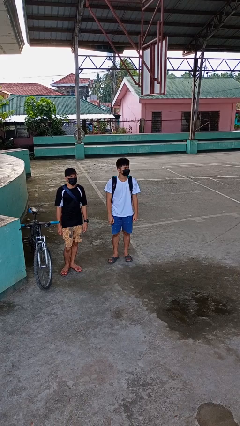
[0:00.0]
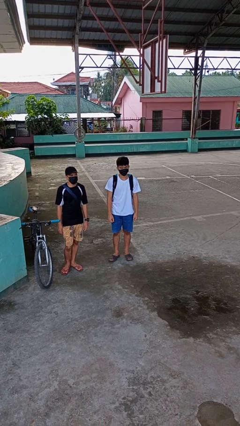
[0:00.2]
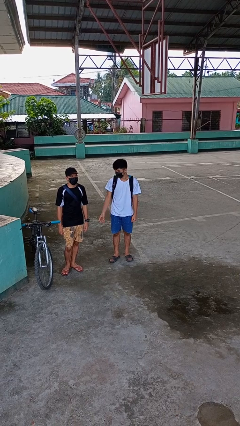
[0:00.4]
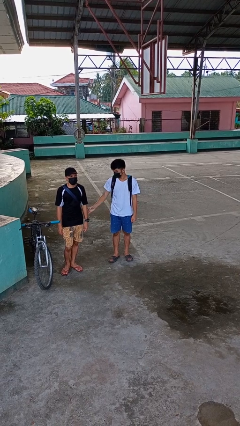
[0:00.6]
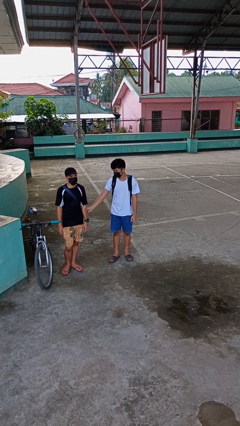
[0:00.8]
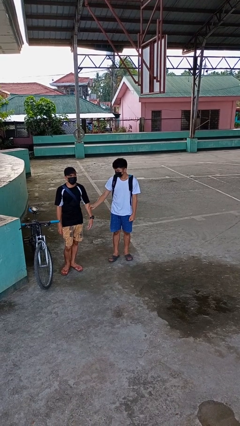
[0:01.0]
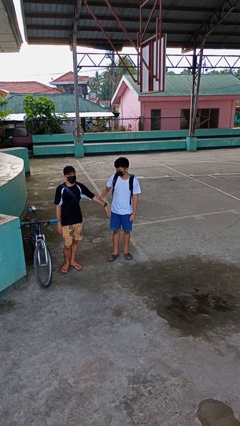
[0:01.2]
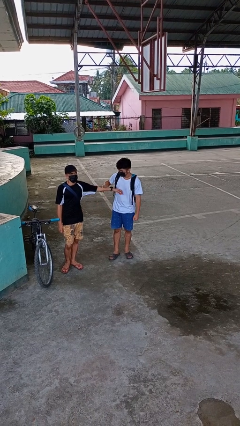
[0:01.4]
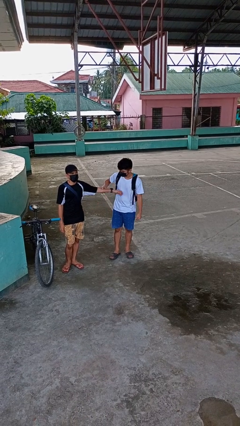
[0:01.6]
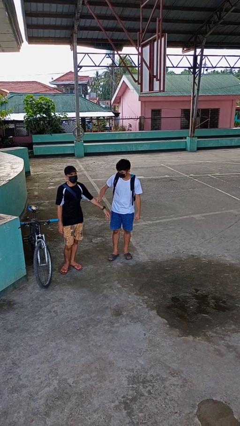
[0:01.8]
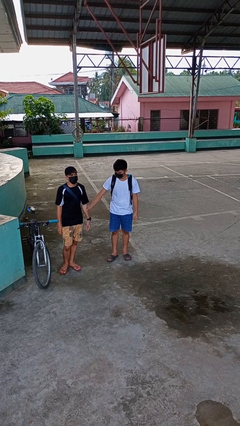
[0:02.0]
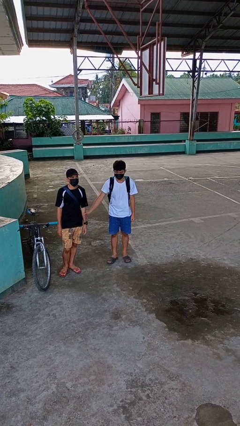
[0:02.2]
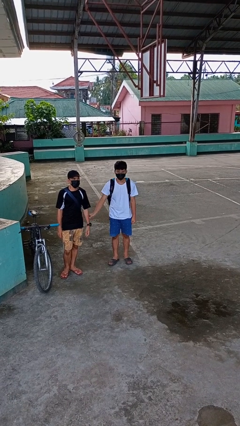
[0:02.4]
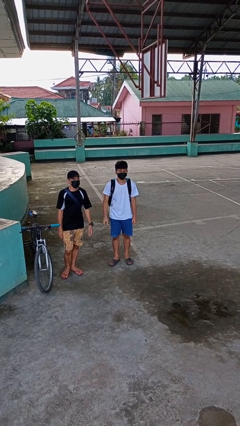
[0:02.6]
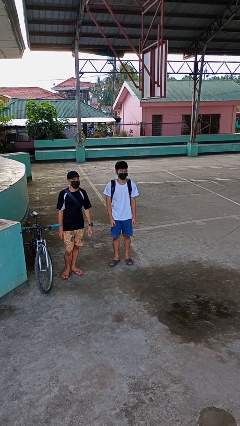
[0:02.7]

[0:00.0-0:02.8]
person grabs person by forearm

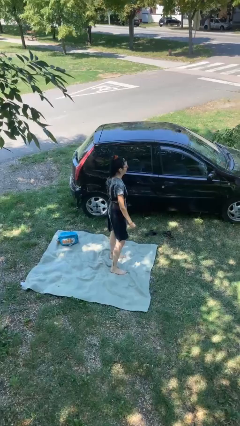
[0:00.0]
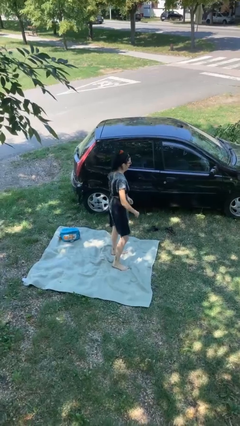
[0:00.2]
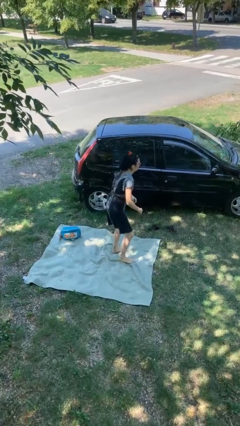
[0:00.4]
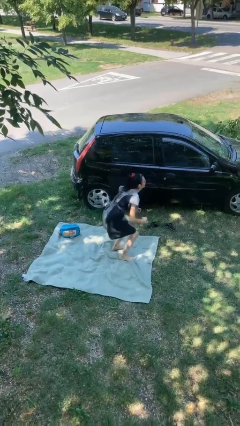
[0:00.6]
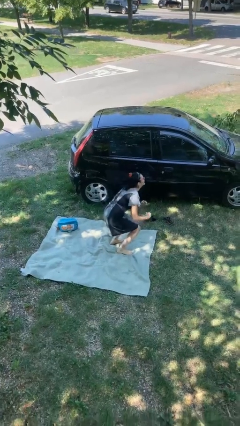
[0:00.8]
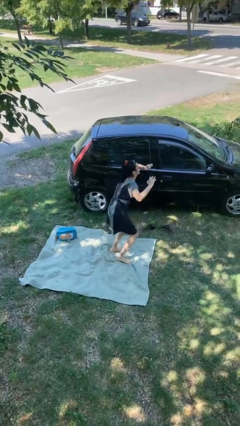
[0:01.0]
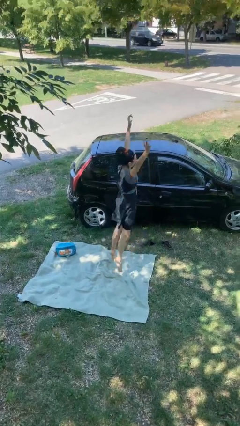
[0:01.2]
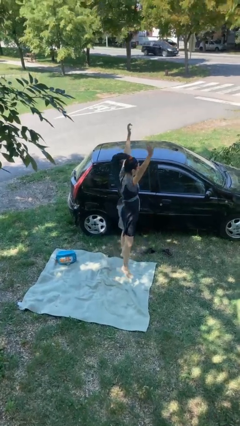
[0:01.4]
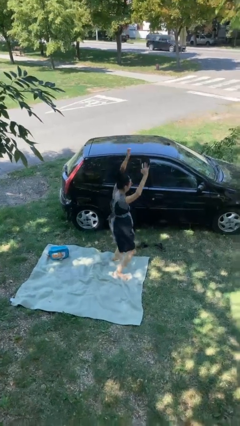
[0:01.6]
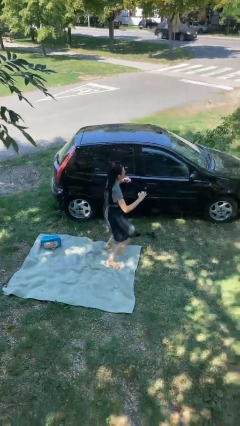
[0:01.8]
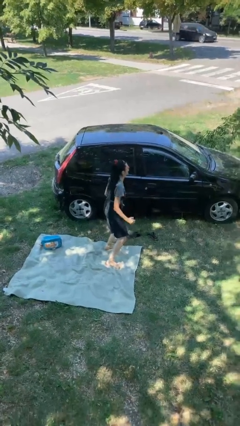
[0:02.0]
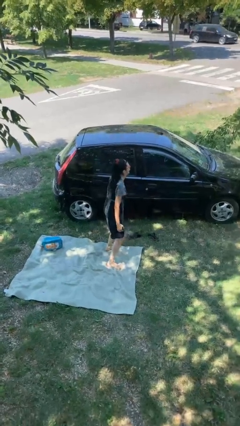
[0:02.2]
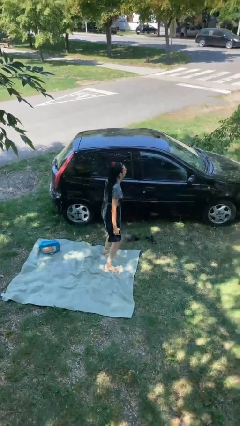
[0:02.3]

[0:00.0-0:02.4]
person jumps

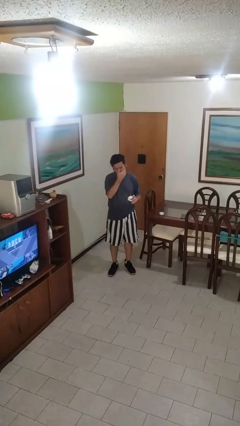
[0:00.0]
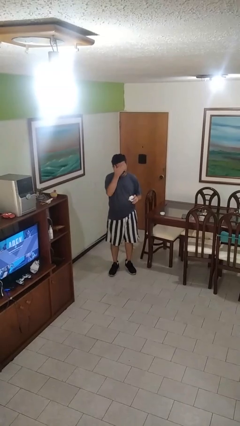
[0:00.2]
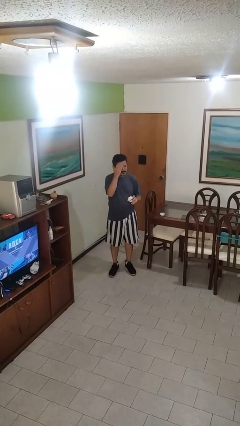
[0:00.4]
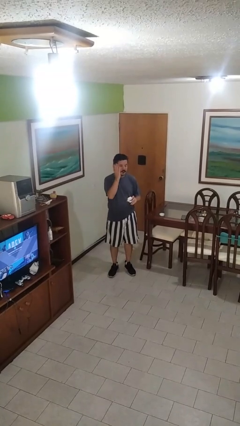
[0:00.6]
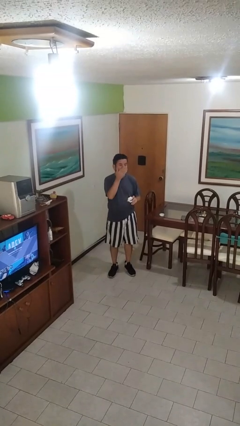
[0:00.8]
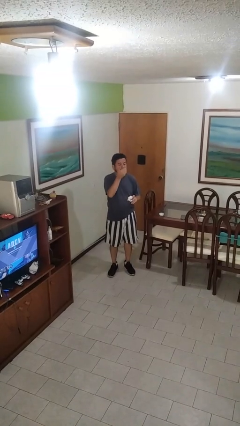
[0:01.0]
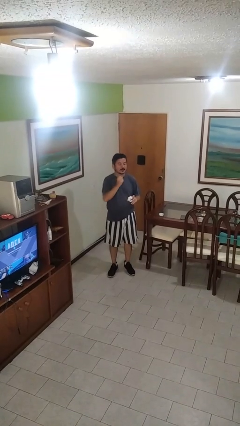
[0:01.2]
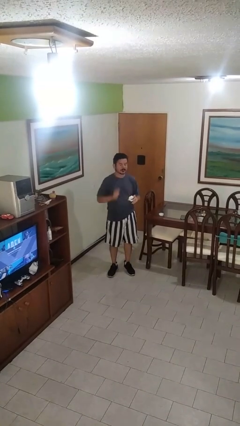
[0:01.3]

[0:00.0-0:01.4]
person applies facial moisturizer

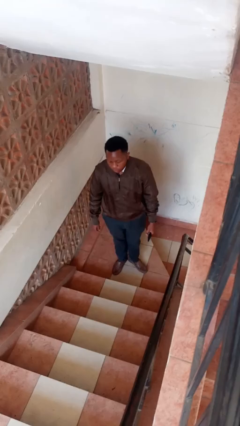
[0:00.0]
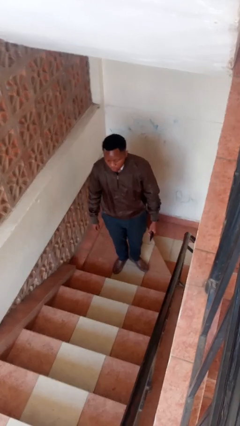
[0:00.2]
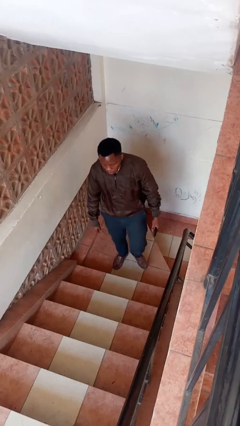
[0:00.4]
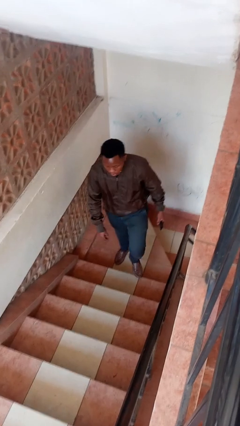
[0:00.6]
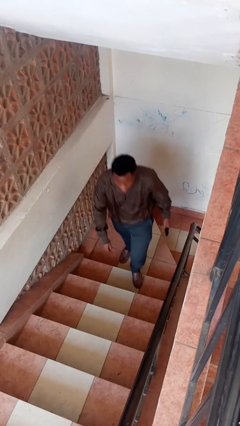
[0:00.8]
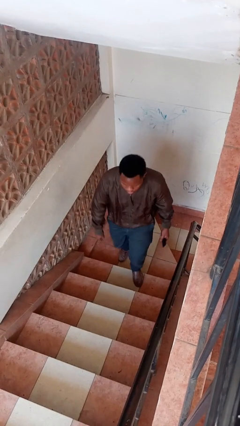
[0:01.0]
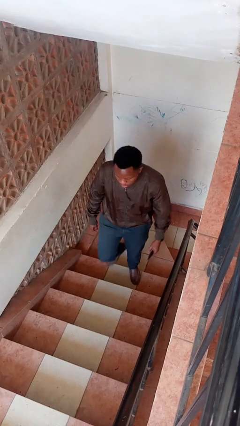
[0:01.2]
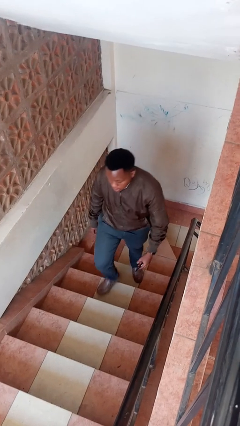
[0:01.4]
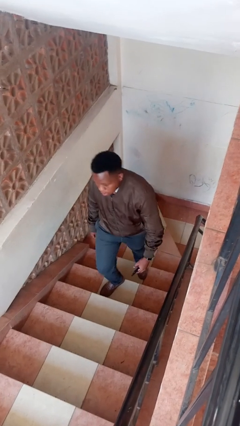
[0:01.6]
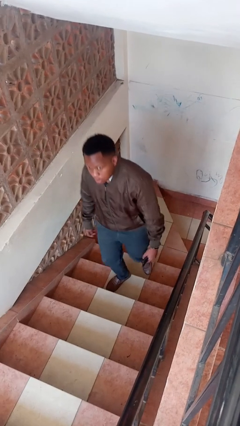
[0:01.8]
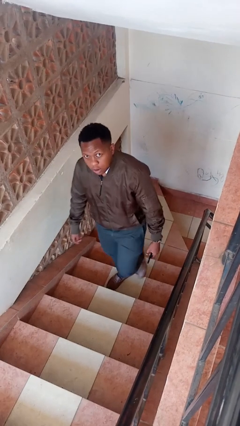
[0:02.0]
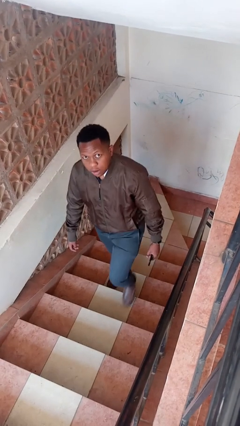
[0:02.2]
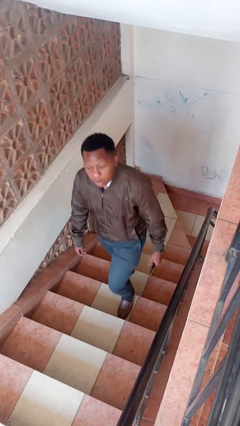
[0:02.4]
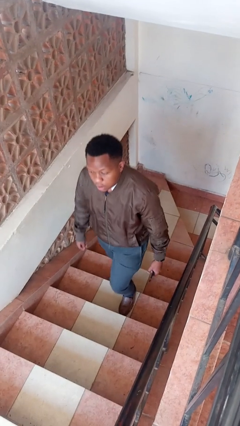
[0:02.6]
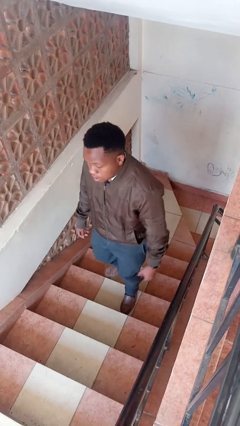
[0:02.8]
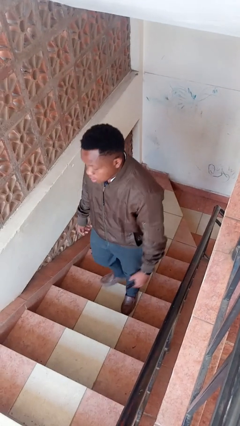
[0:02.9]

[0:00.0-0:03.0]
person climbs up stairs

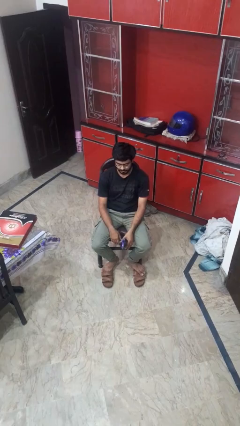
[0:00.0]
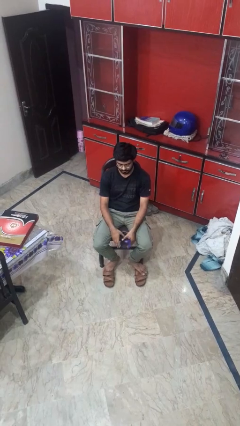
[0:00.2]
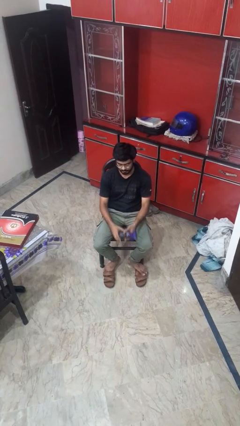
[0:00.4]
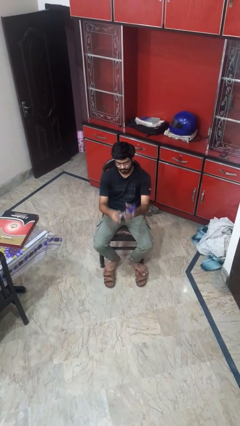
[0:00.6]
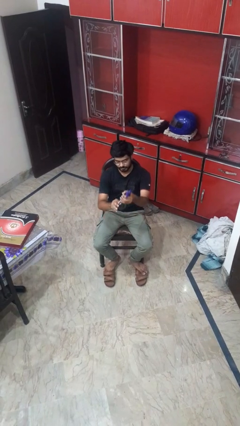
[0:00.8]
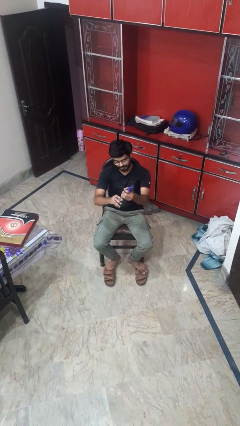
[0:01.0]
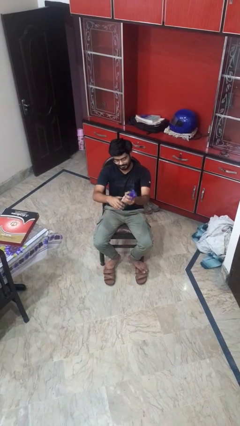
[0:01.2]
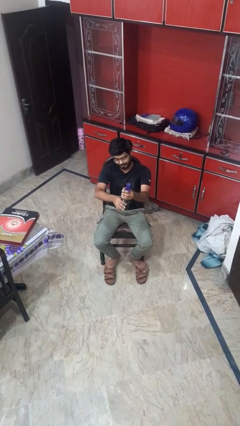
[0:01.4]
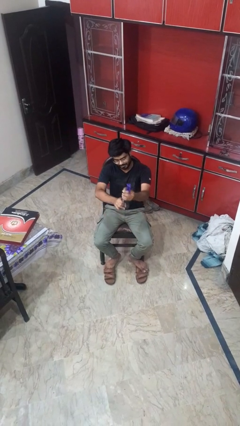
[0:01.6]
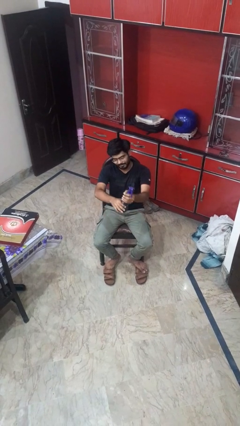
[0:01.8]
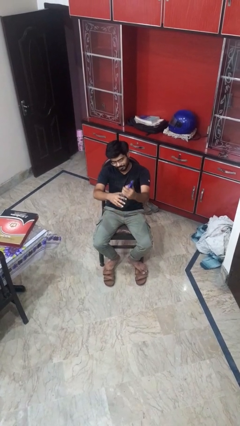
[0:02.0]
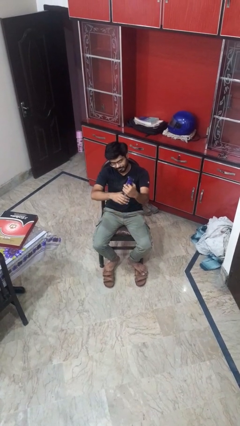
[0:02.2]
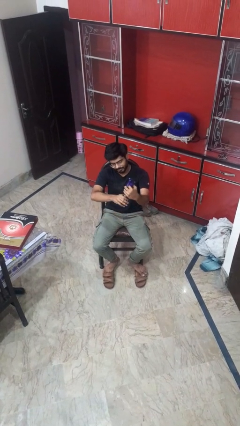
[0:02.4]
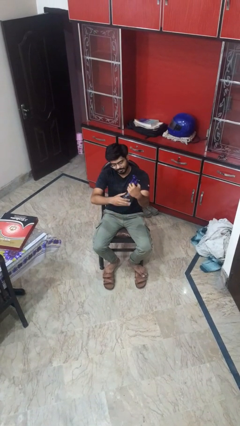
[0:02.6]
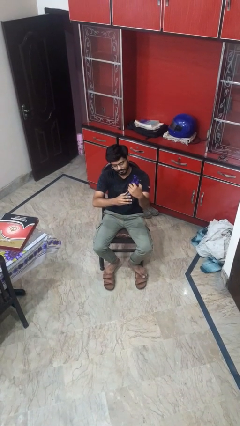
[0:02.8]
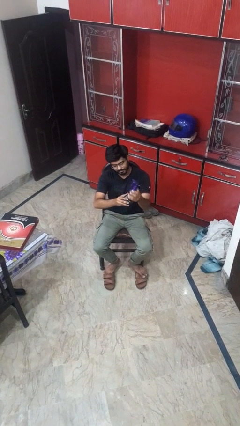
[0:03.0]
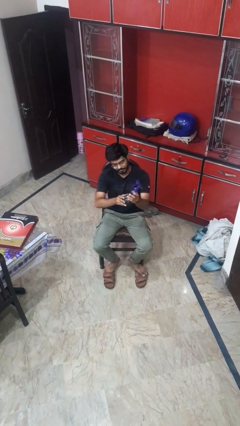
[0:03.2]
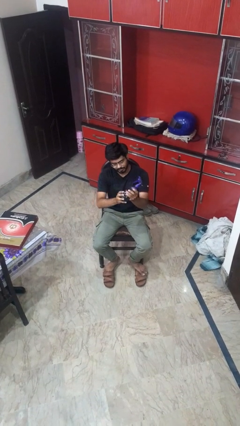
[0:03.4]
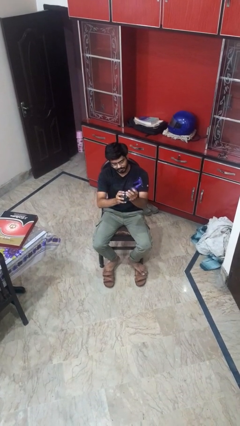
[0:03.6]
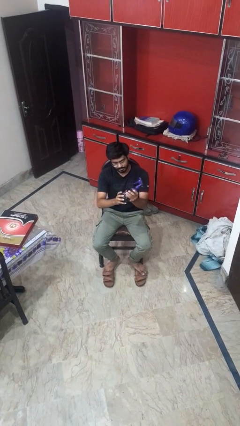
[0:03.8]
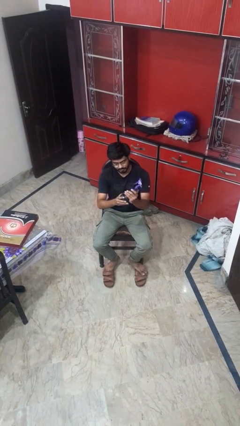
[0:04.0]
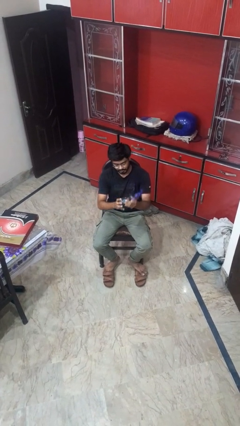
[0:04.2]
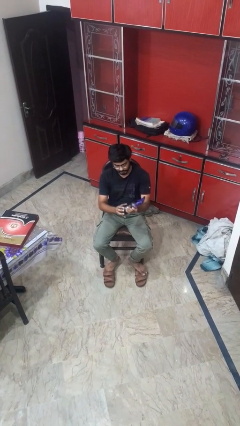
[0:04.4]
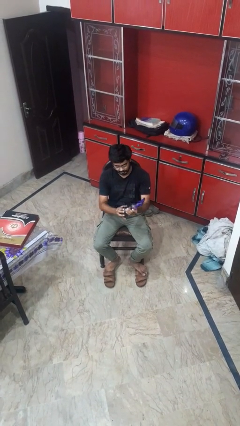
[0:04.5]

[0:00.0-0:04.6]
person squeezes object

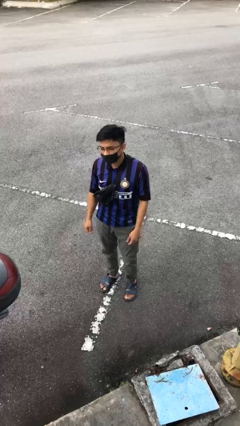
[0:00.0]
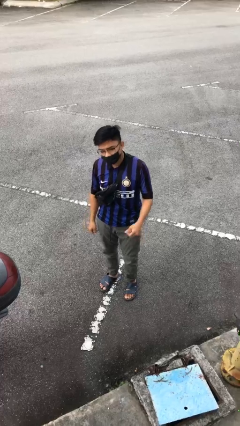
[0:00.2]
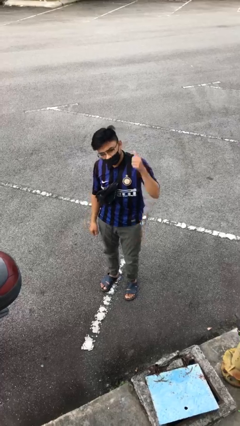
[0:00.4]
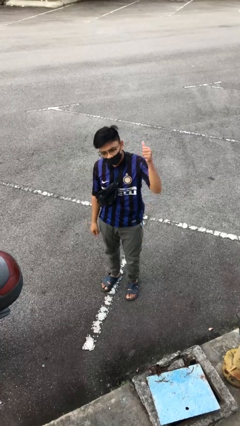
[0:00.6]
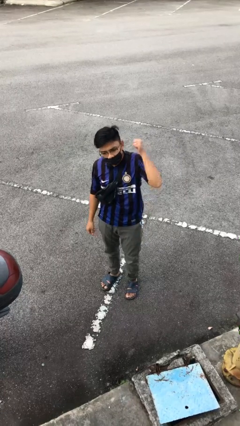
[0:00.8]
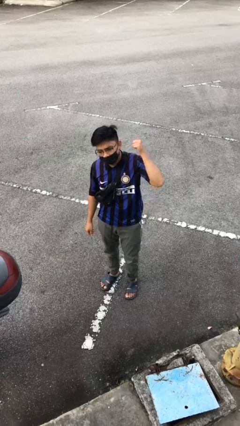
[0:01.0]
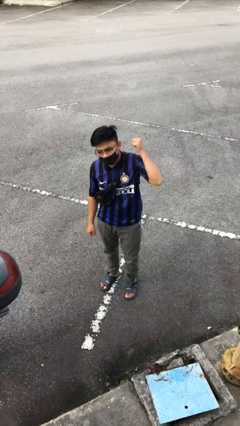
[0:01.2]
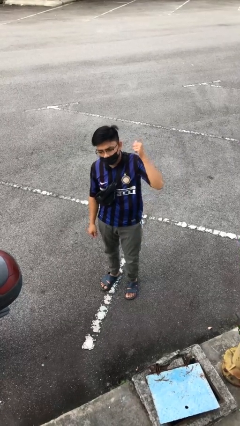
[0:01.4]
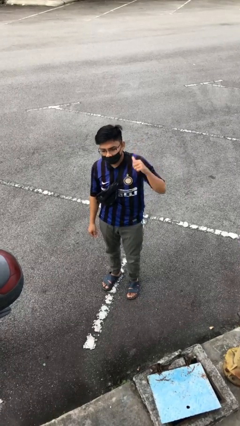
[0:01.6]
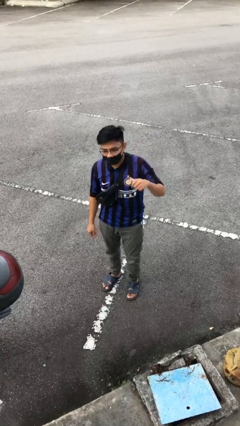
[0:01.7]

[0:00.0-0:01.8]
person gestures behind me

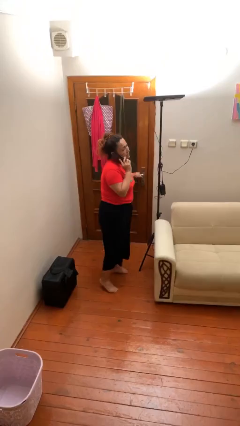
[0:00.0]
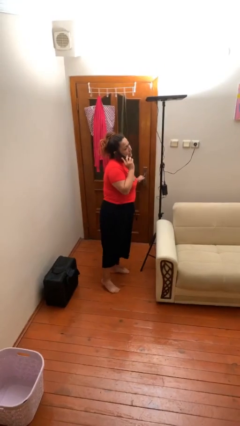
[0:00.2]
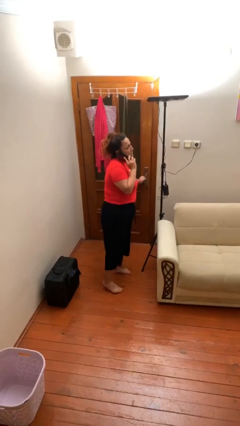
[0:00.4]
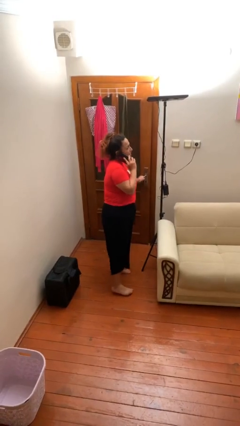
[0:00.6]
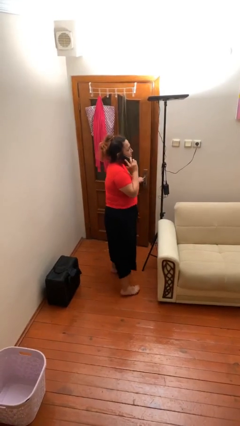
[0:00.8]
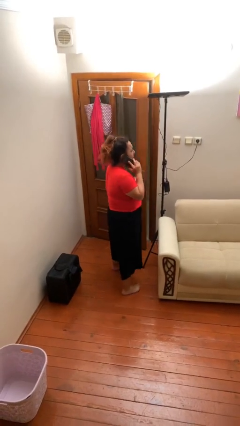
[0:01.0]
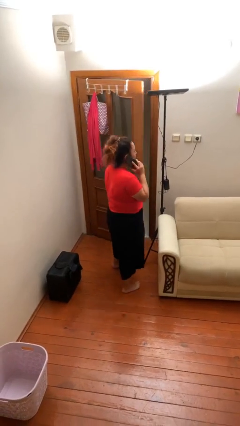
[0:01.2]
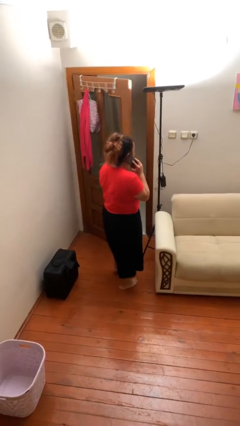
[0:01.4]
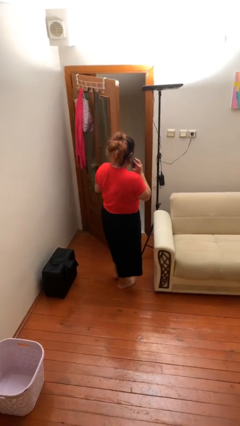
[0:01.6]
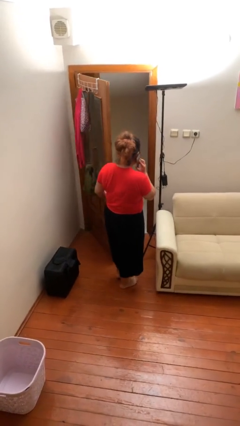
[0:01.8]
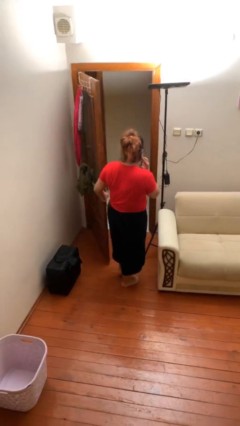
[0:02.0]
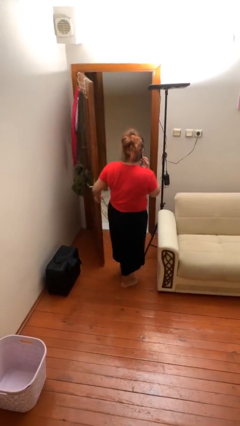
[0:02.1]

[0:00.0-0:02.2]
person opens facility door
